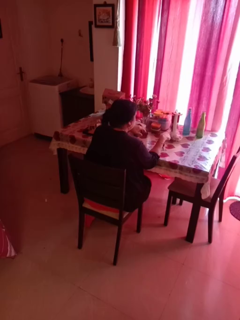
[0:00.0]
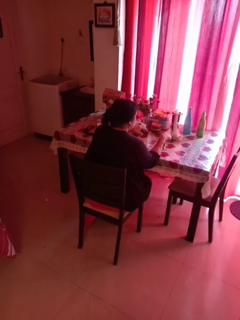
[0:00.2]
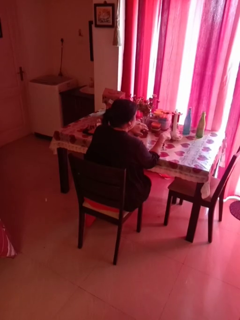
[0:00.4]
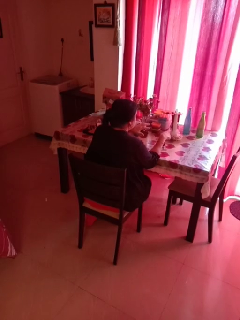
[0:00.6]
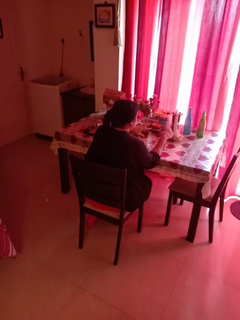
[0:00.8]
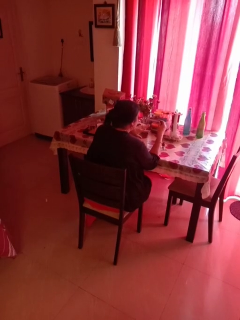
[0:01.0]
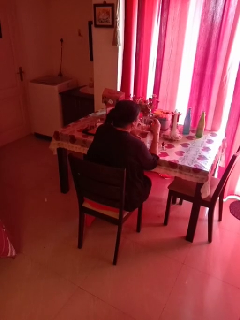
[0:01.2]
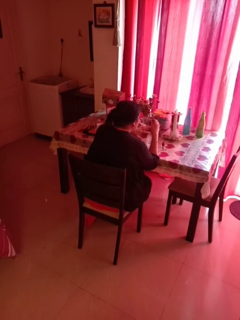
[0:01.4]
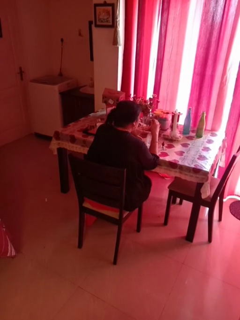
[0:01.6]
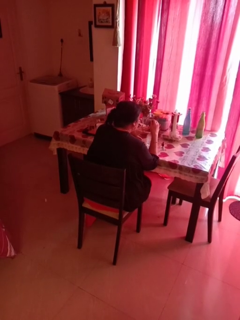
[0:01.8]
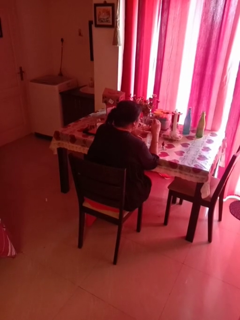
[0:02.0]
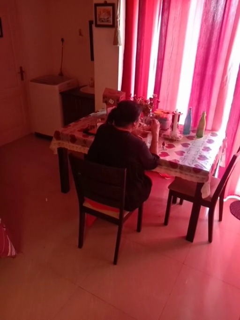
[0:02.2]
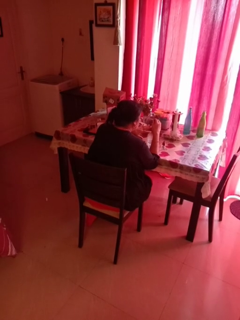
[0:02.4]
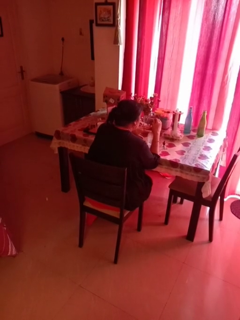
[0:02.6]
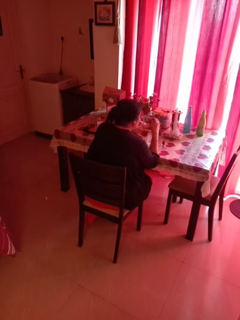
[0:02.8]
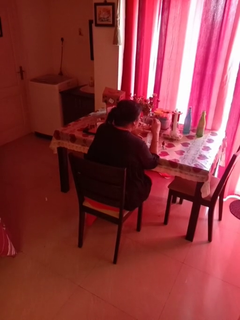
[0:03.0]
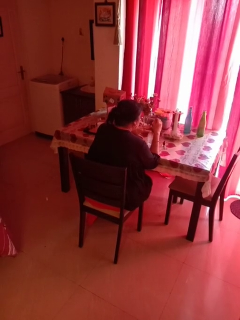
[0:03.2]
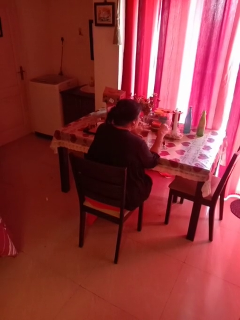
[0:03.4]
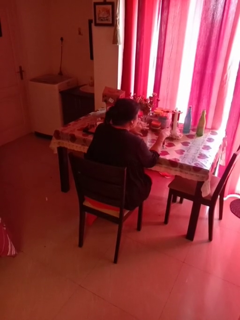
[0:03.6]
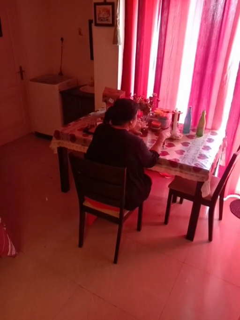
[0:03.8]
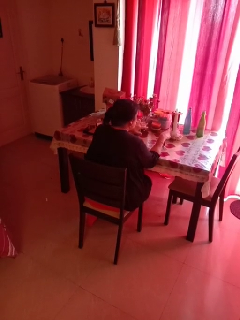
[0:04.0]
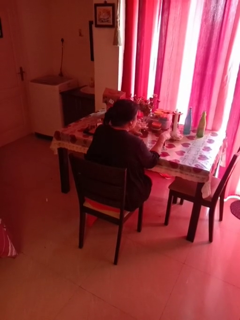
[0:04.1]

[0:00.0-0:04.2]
person paints fingernails

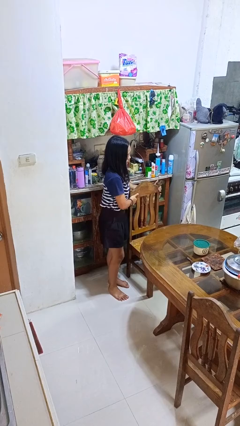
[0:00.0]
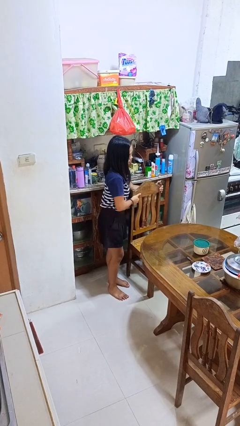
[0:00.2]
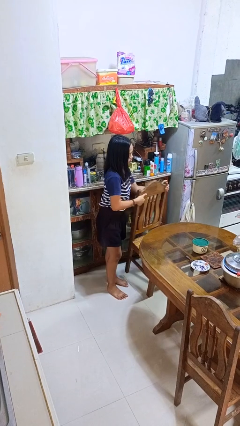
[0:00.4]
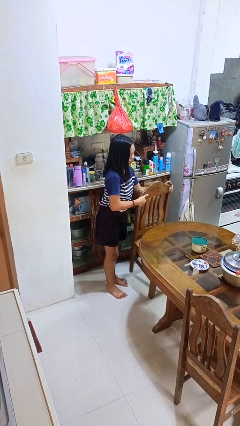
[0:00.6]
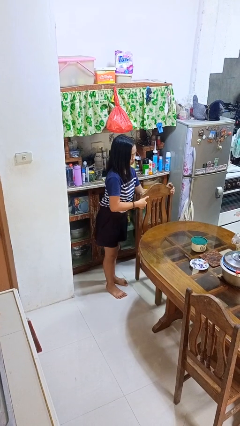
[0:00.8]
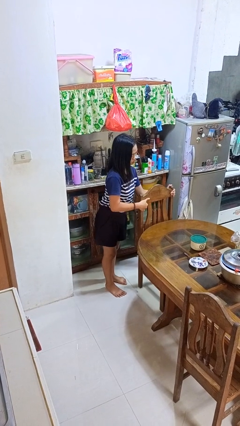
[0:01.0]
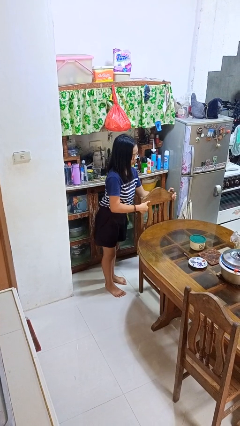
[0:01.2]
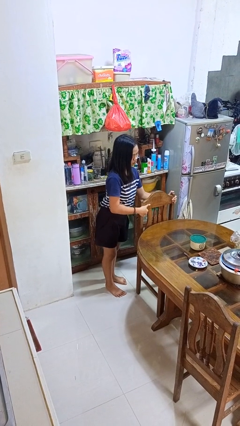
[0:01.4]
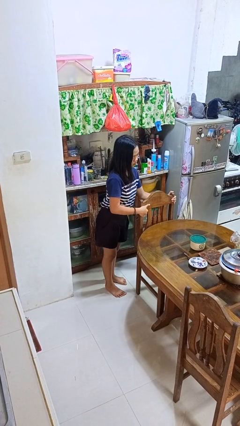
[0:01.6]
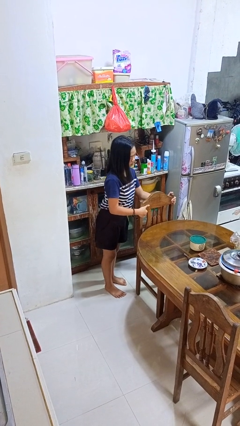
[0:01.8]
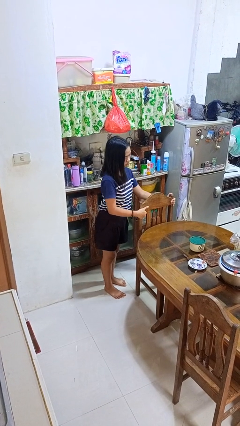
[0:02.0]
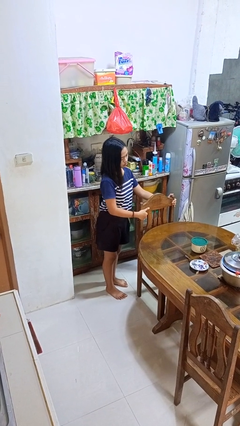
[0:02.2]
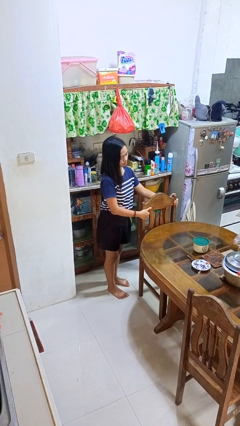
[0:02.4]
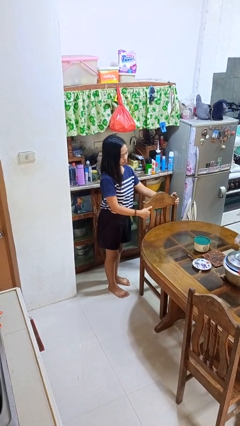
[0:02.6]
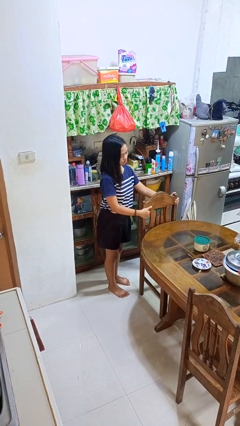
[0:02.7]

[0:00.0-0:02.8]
person pushes in chair

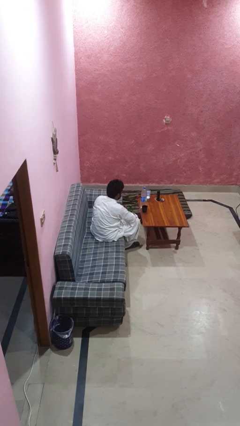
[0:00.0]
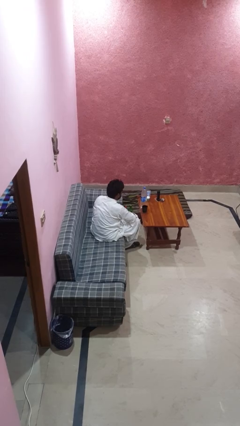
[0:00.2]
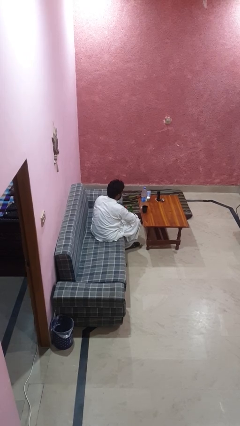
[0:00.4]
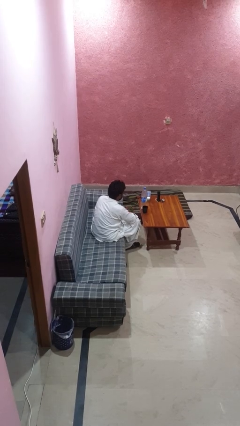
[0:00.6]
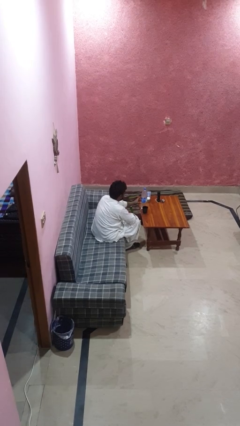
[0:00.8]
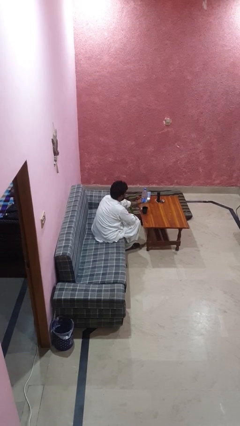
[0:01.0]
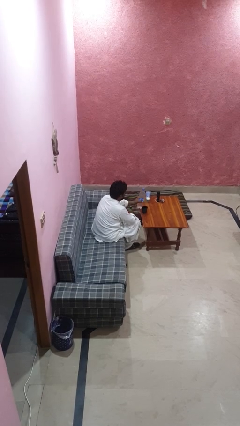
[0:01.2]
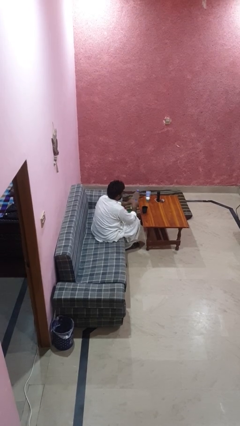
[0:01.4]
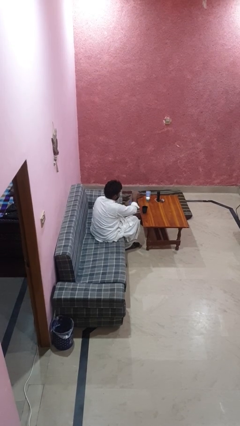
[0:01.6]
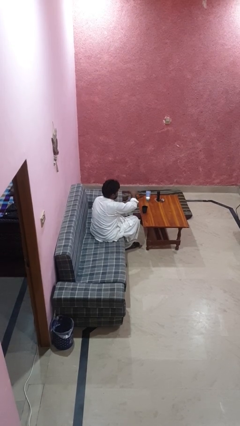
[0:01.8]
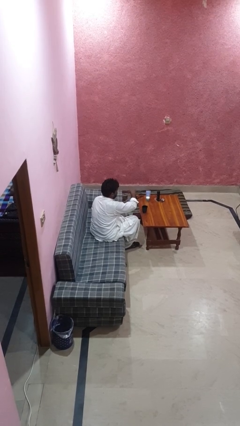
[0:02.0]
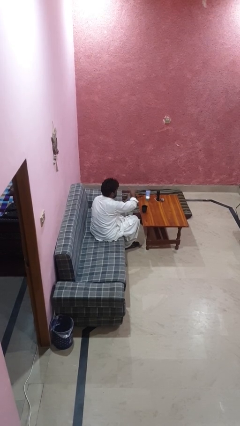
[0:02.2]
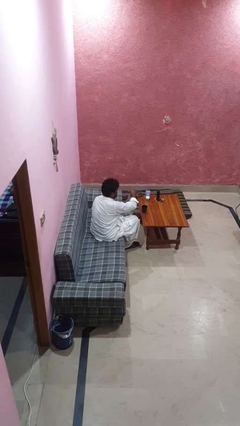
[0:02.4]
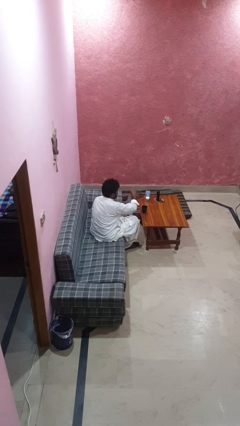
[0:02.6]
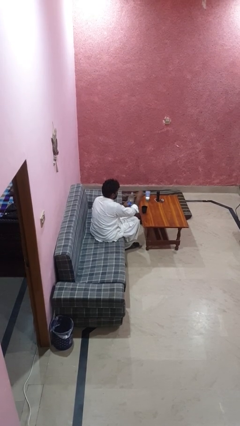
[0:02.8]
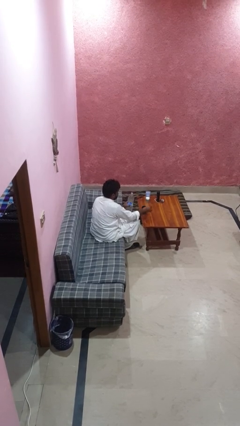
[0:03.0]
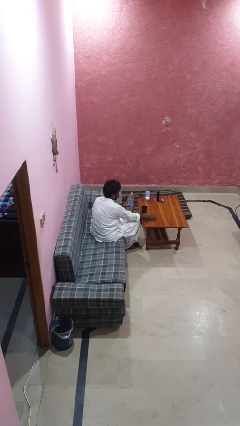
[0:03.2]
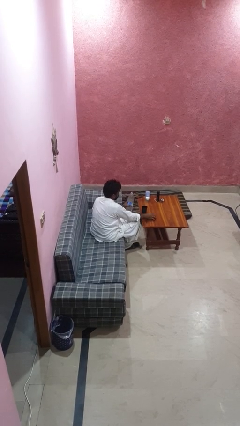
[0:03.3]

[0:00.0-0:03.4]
person unscrews lid from bottle

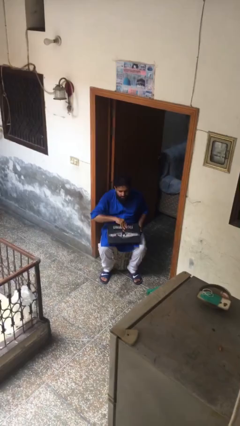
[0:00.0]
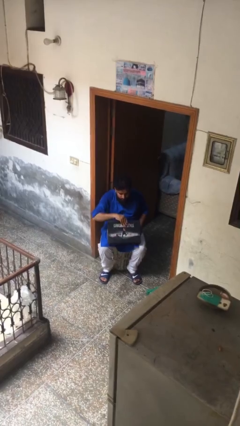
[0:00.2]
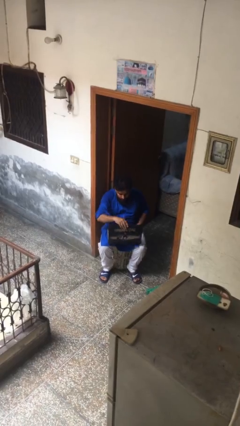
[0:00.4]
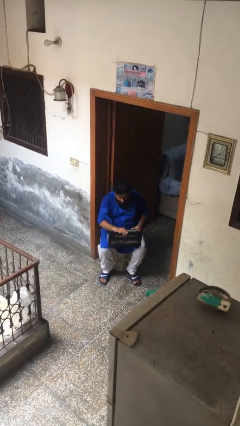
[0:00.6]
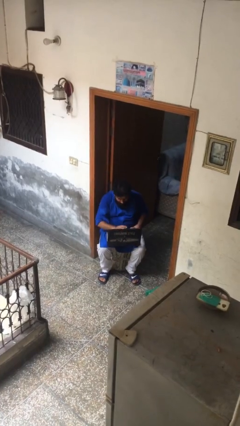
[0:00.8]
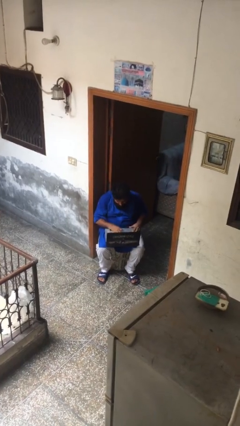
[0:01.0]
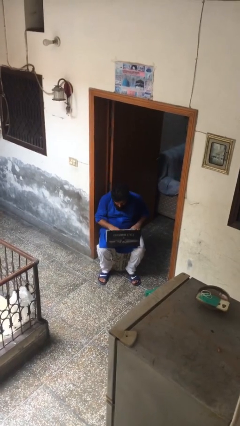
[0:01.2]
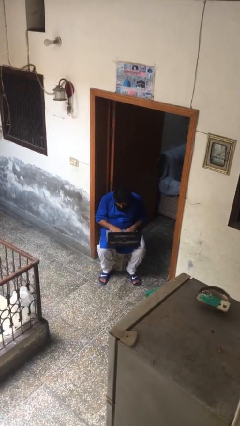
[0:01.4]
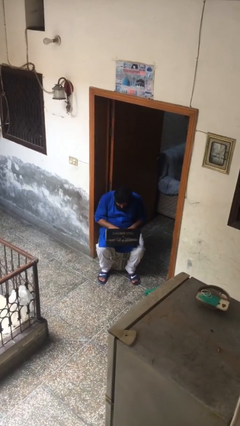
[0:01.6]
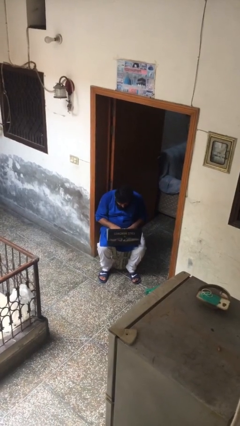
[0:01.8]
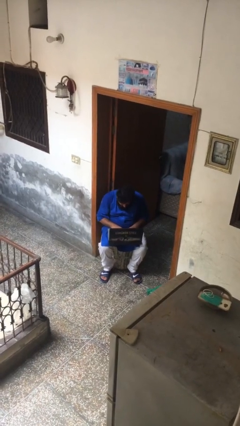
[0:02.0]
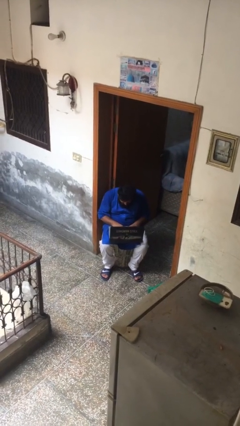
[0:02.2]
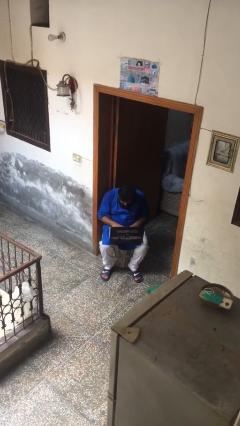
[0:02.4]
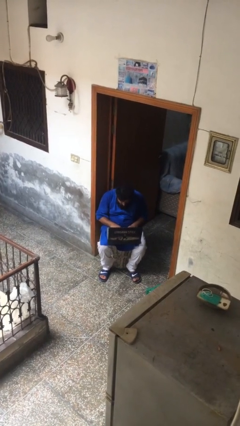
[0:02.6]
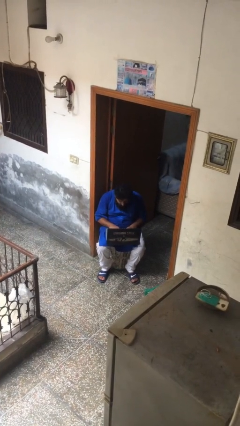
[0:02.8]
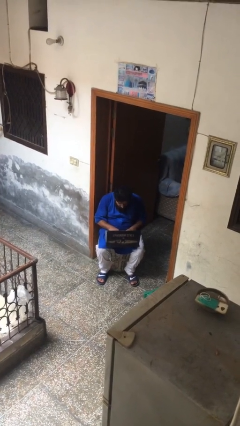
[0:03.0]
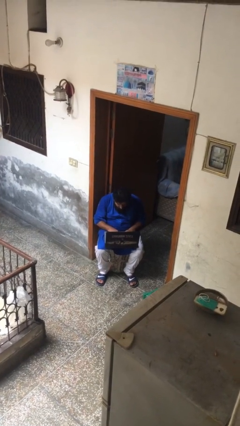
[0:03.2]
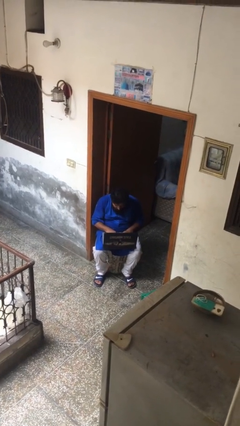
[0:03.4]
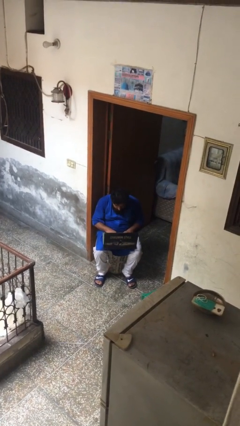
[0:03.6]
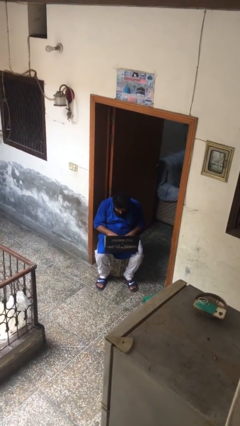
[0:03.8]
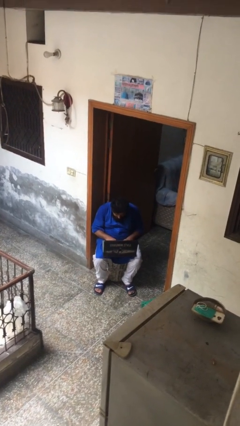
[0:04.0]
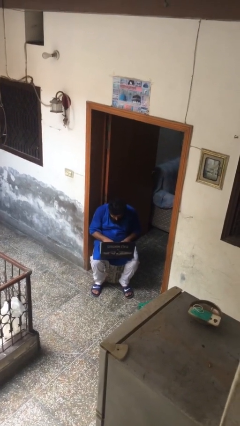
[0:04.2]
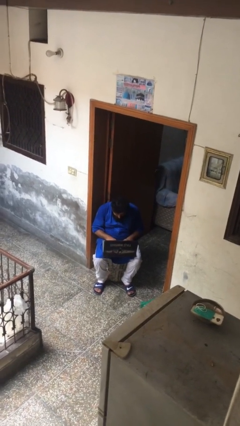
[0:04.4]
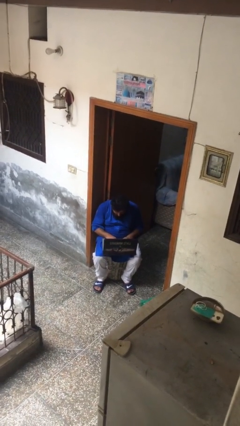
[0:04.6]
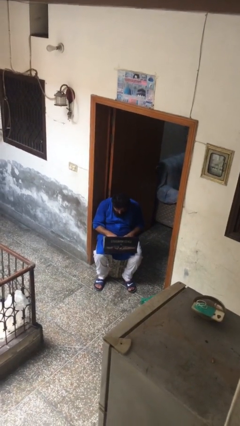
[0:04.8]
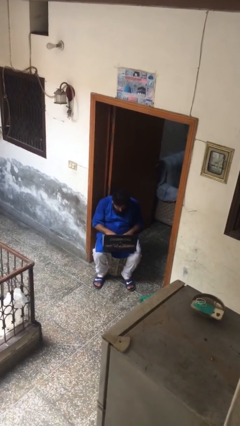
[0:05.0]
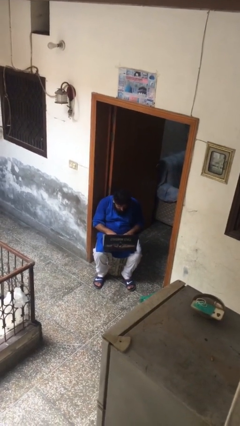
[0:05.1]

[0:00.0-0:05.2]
person interacts with laptop

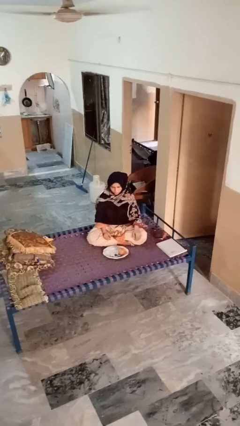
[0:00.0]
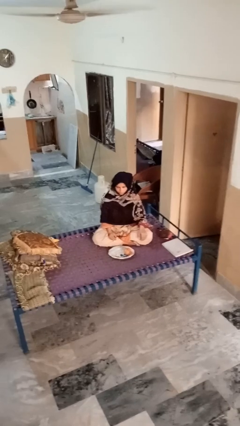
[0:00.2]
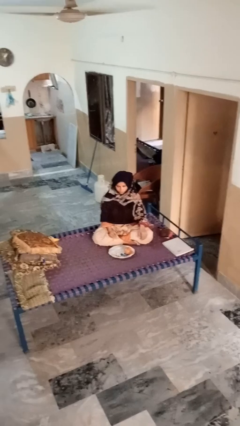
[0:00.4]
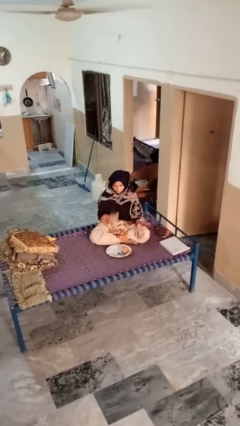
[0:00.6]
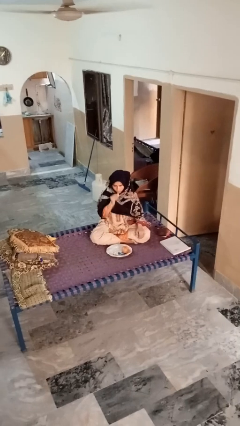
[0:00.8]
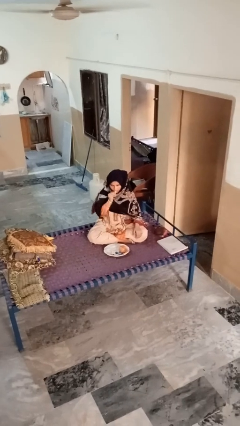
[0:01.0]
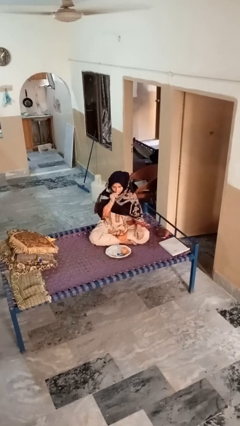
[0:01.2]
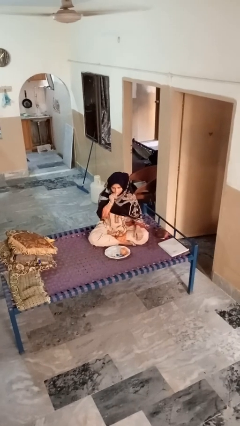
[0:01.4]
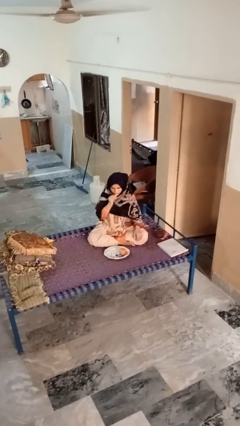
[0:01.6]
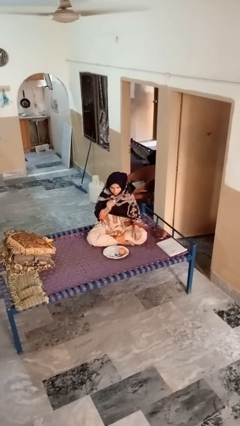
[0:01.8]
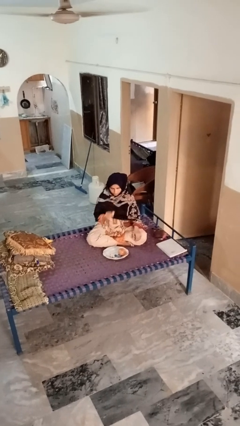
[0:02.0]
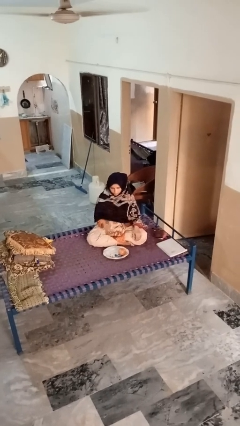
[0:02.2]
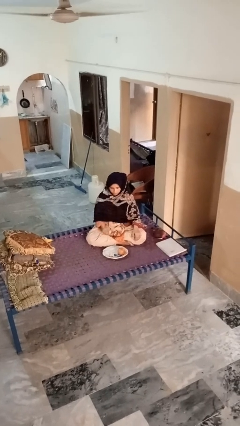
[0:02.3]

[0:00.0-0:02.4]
person eats apple

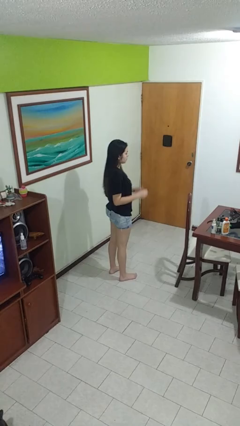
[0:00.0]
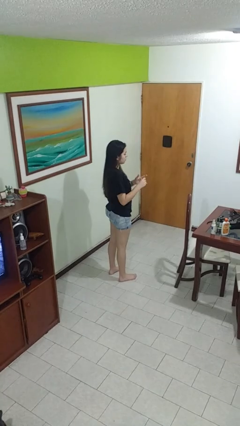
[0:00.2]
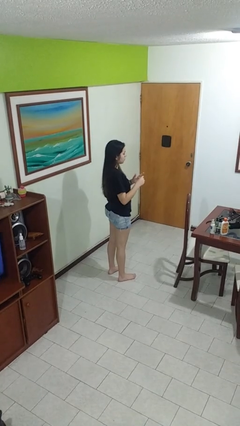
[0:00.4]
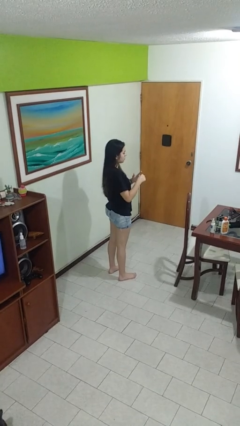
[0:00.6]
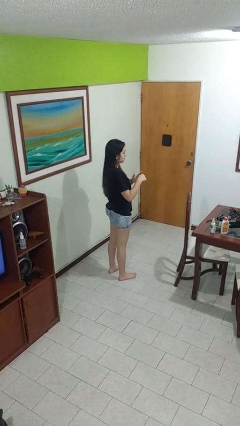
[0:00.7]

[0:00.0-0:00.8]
person puts on ring
